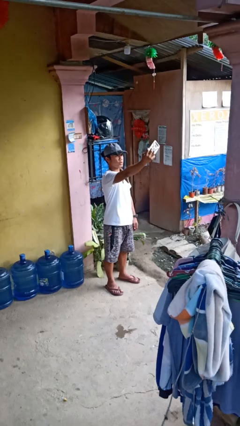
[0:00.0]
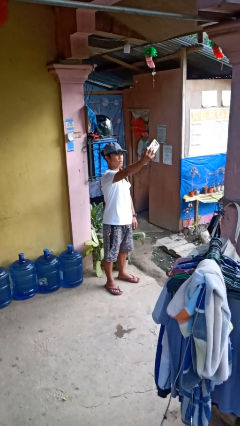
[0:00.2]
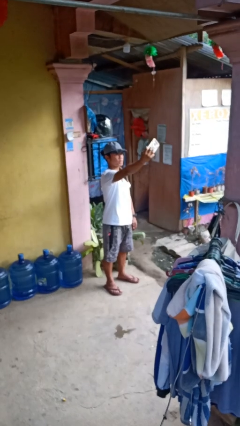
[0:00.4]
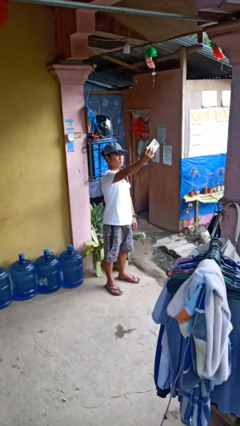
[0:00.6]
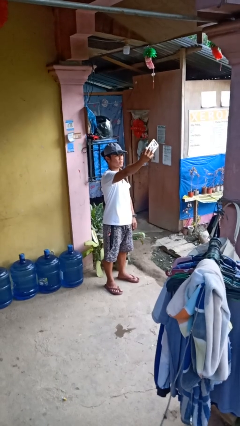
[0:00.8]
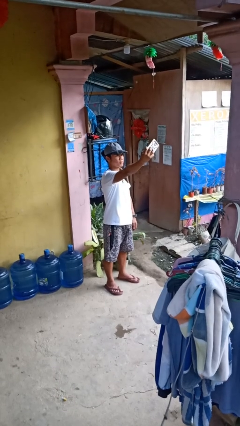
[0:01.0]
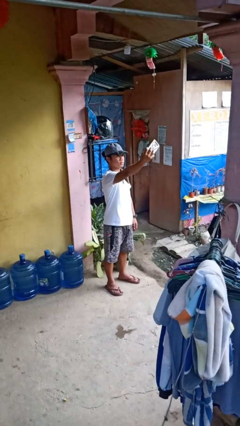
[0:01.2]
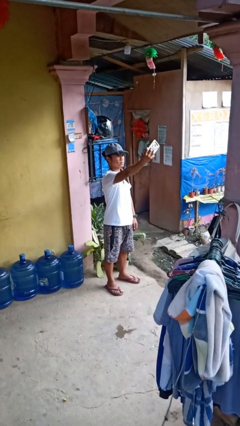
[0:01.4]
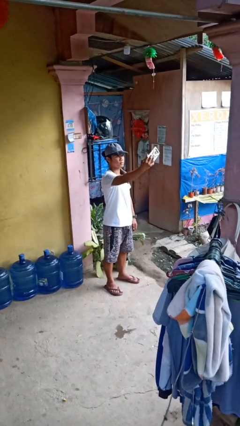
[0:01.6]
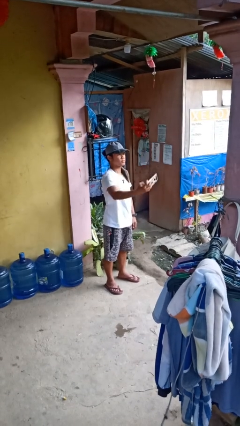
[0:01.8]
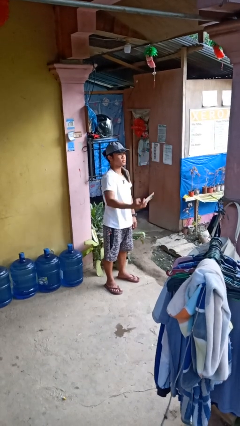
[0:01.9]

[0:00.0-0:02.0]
person takes selfie

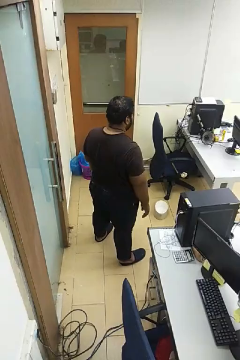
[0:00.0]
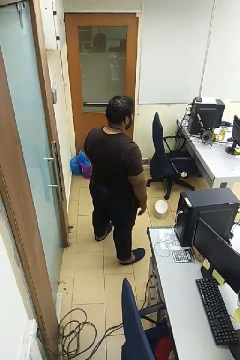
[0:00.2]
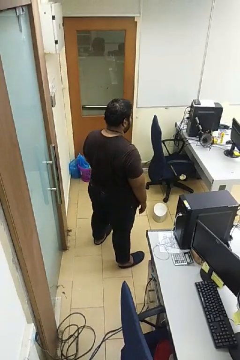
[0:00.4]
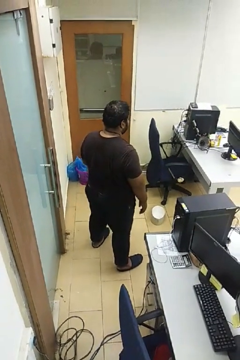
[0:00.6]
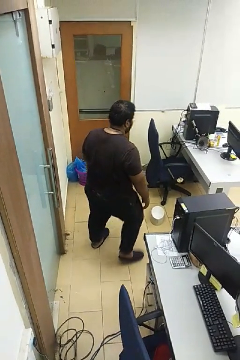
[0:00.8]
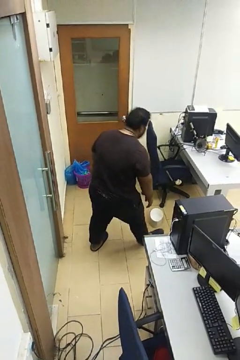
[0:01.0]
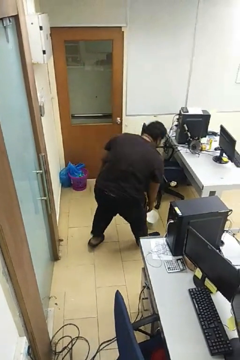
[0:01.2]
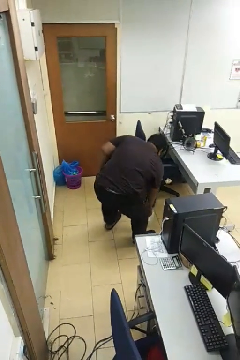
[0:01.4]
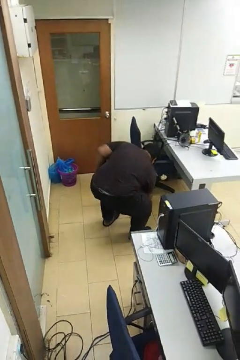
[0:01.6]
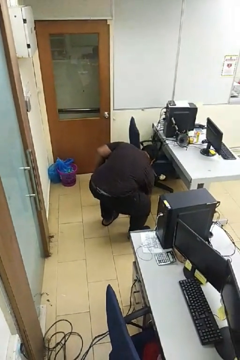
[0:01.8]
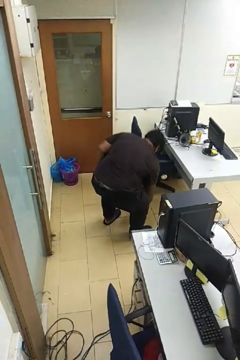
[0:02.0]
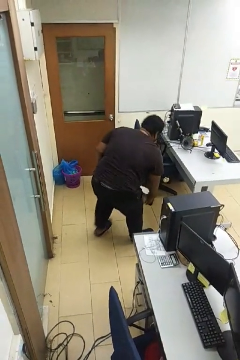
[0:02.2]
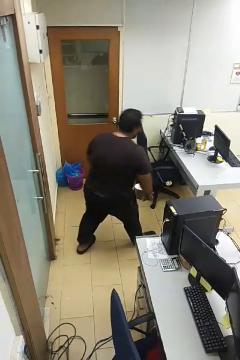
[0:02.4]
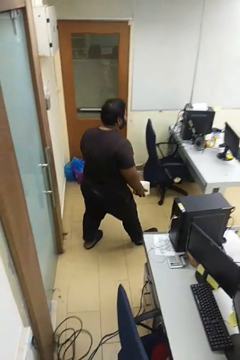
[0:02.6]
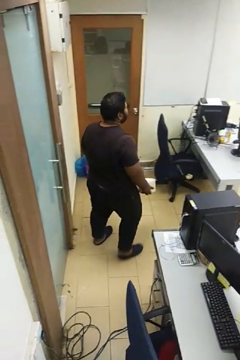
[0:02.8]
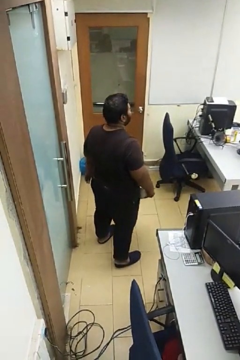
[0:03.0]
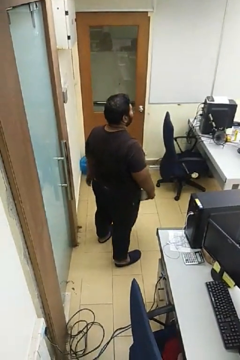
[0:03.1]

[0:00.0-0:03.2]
person picks up object from floor

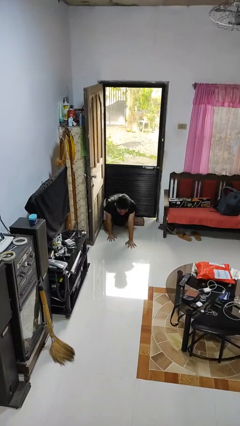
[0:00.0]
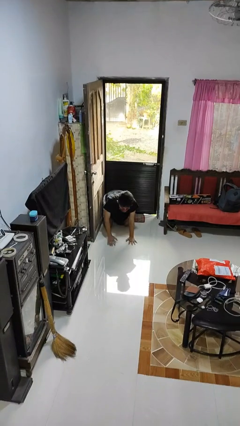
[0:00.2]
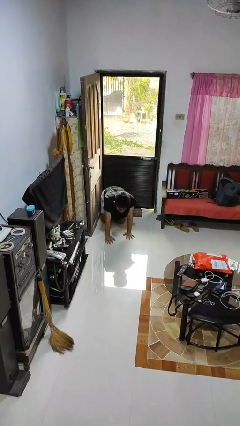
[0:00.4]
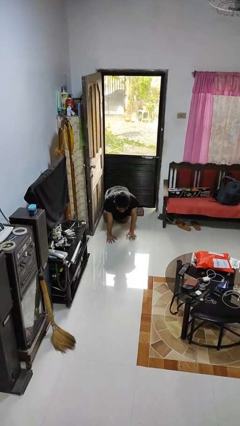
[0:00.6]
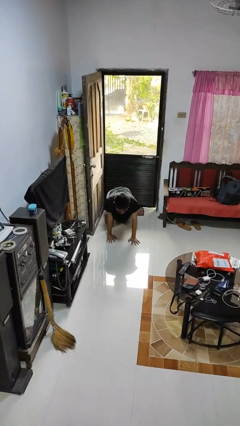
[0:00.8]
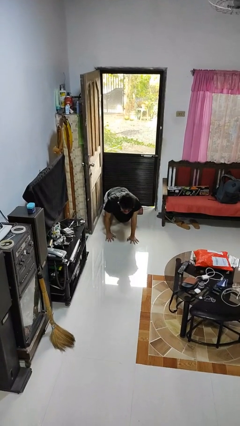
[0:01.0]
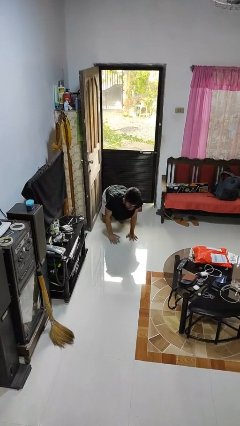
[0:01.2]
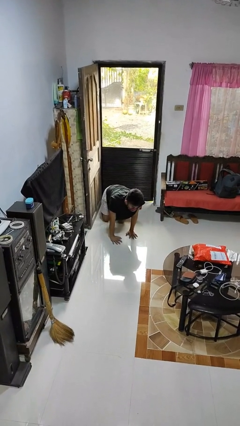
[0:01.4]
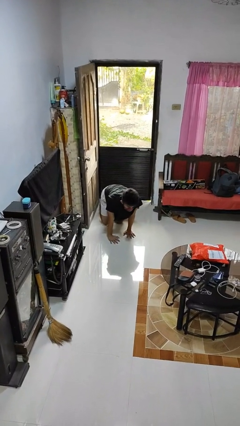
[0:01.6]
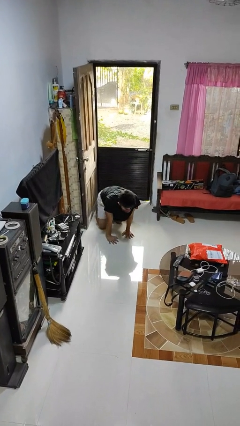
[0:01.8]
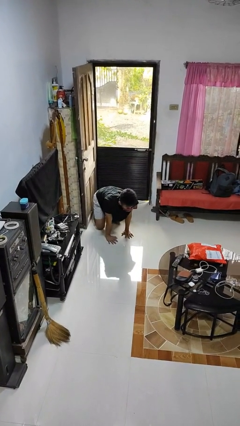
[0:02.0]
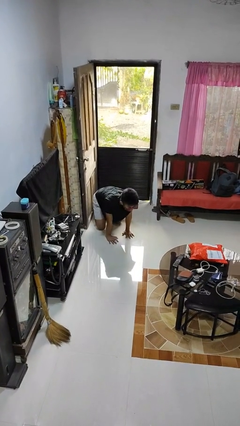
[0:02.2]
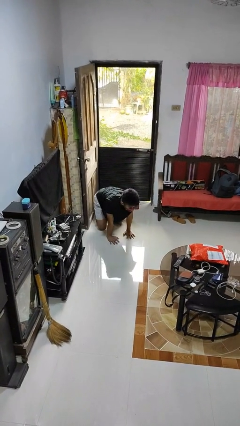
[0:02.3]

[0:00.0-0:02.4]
person crawls

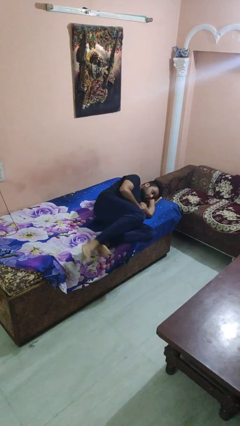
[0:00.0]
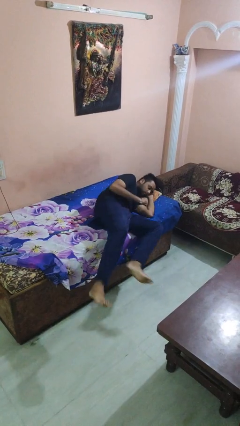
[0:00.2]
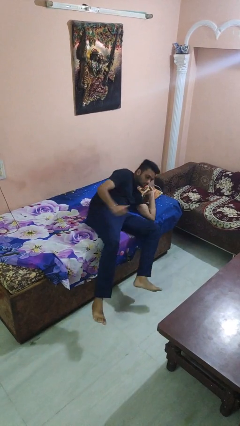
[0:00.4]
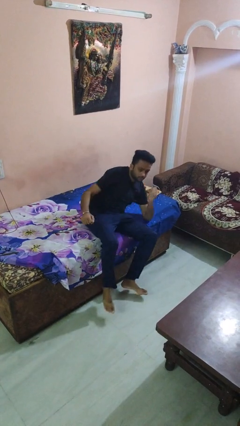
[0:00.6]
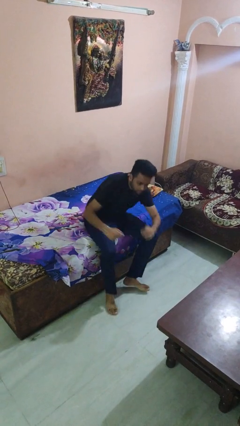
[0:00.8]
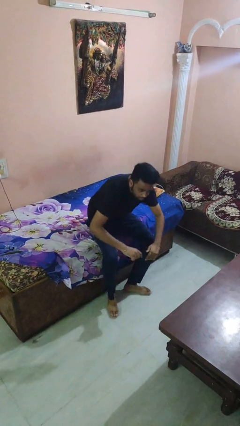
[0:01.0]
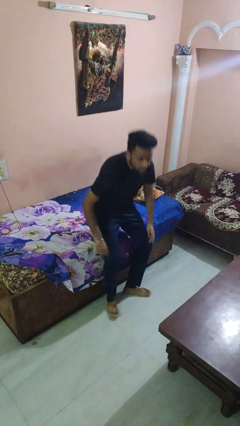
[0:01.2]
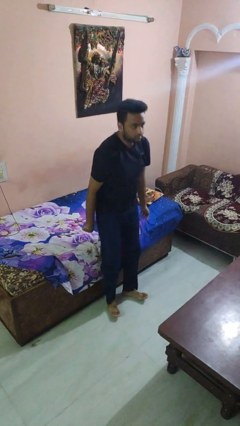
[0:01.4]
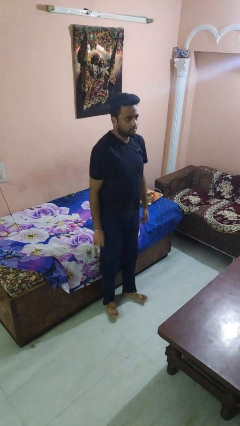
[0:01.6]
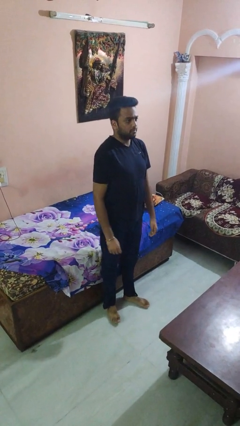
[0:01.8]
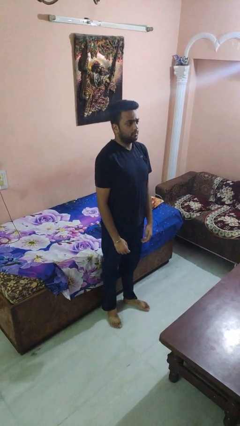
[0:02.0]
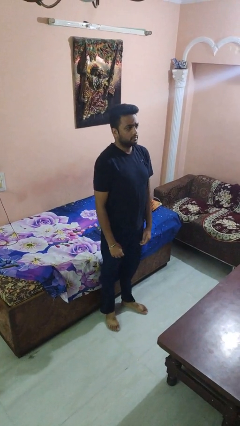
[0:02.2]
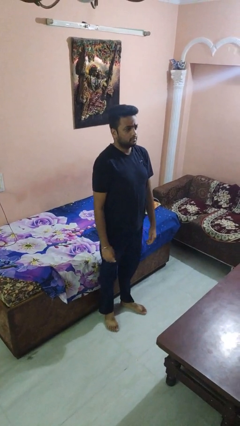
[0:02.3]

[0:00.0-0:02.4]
person stands up

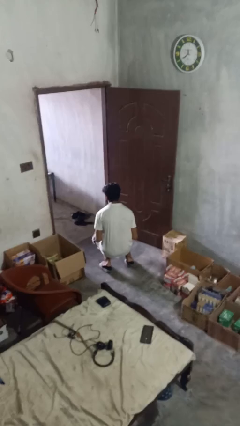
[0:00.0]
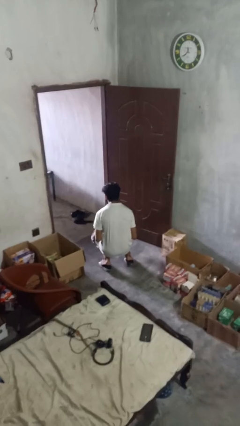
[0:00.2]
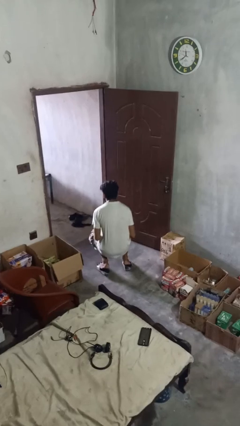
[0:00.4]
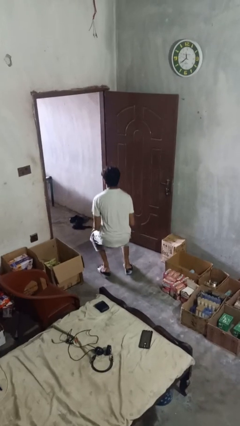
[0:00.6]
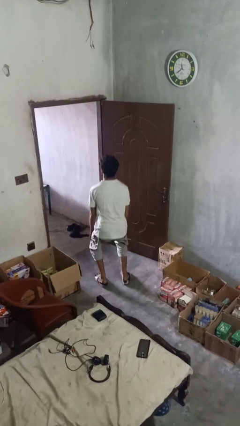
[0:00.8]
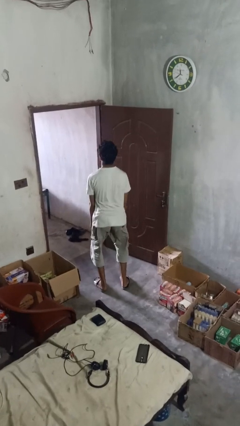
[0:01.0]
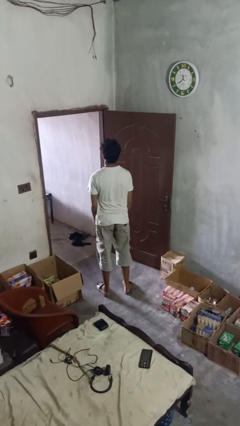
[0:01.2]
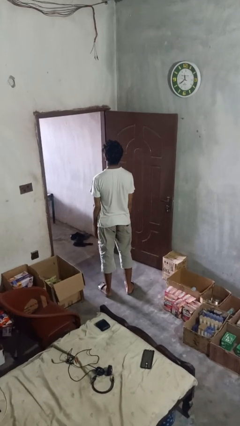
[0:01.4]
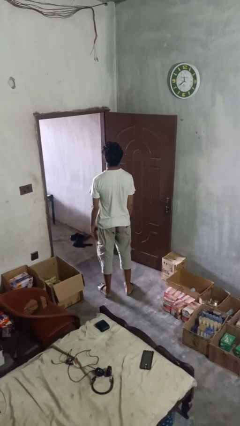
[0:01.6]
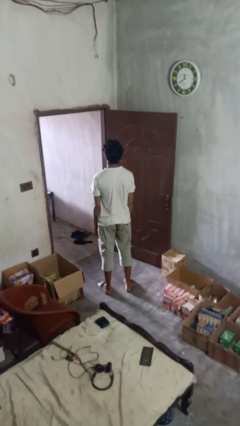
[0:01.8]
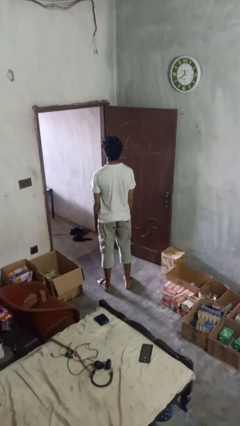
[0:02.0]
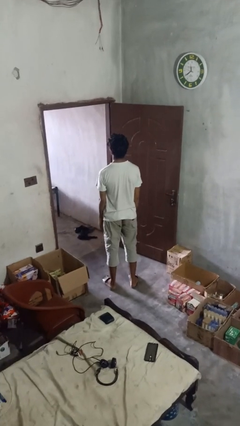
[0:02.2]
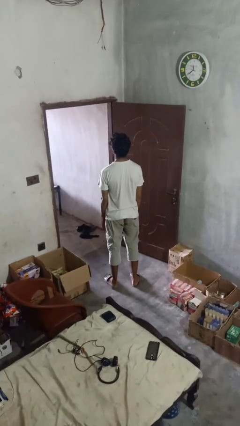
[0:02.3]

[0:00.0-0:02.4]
person stands up from floor

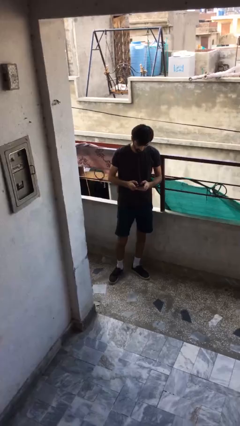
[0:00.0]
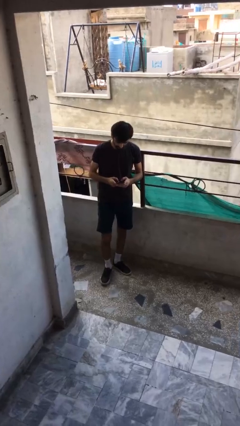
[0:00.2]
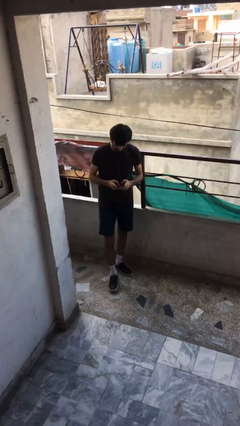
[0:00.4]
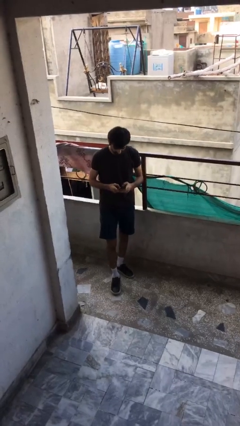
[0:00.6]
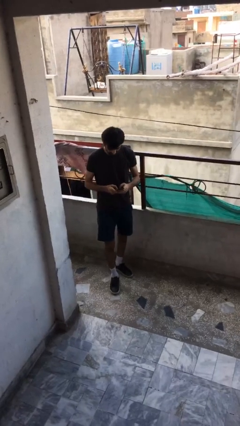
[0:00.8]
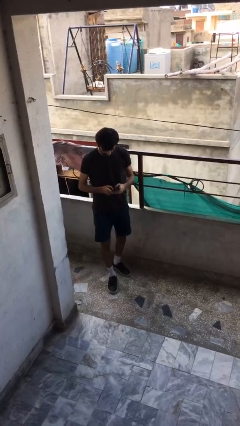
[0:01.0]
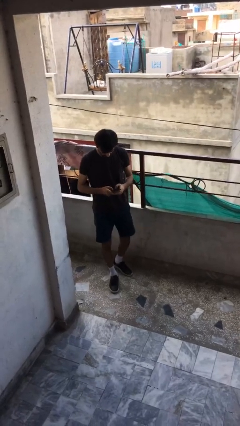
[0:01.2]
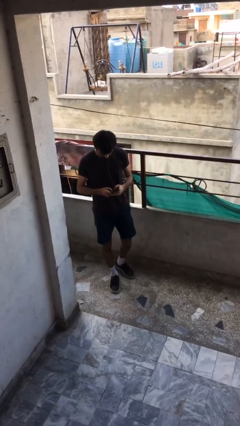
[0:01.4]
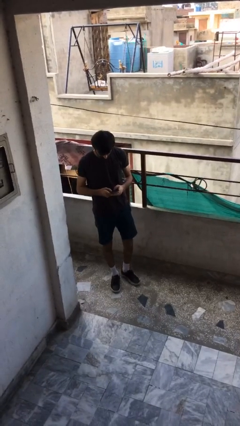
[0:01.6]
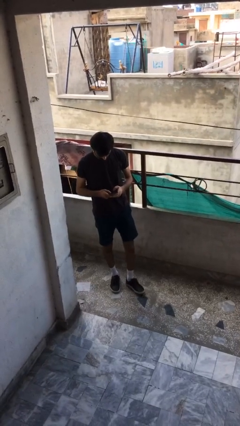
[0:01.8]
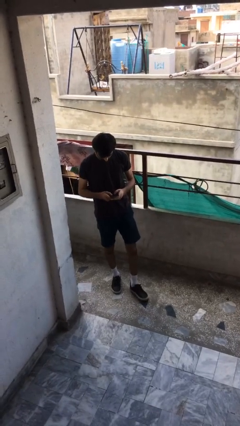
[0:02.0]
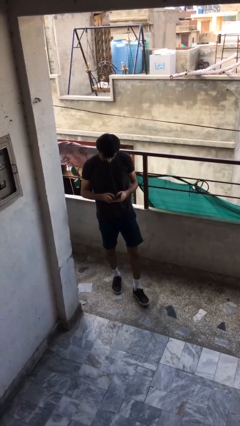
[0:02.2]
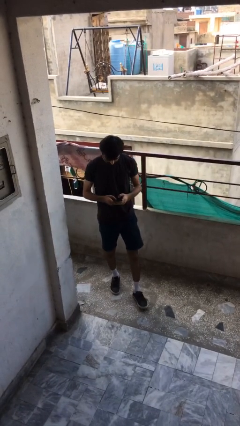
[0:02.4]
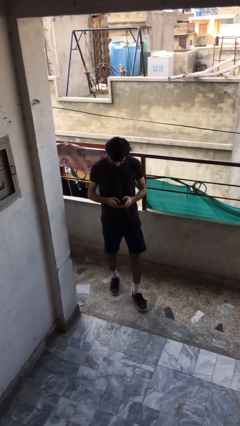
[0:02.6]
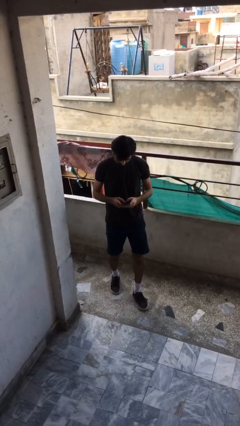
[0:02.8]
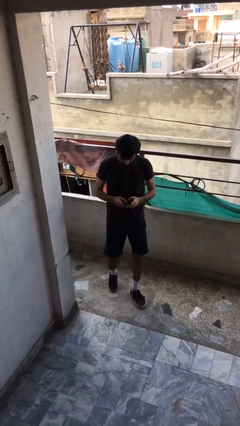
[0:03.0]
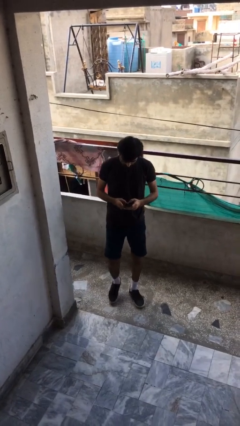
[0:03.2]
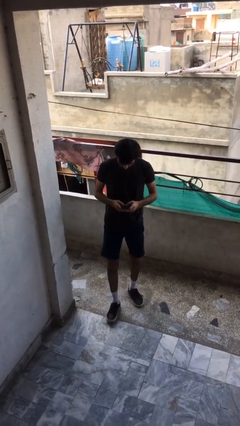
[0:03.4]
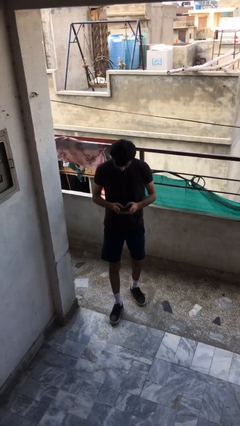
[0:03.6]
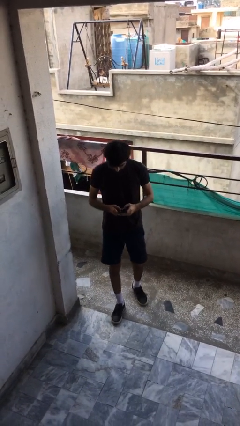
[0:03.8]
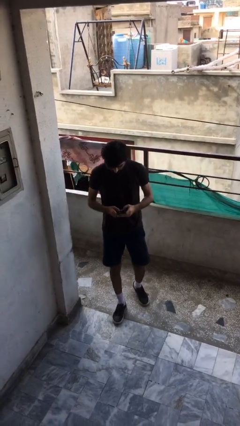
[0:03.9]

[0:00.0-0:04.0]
person texts on phone

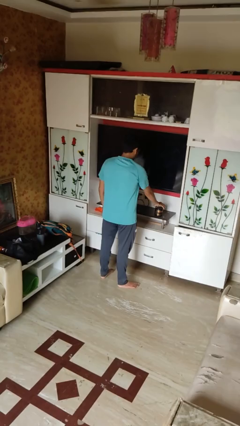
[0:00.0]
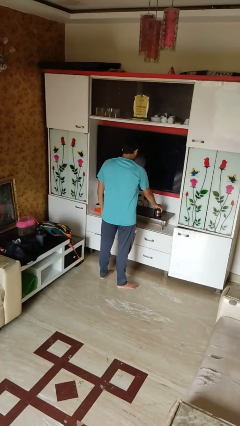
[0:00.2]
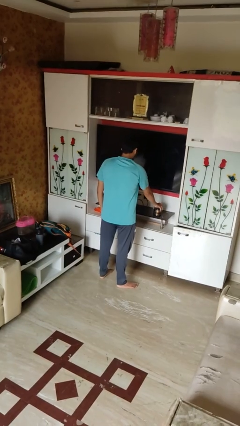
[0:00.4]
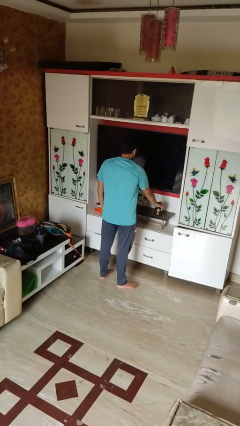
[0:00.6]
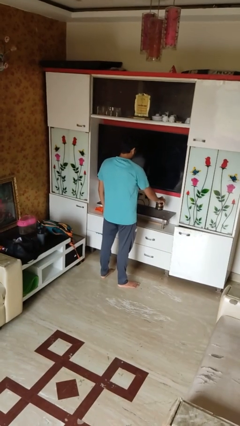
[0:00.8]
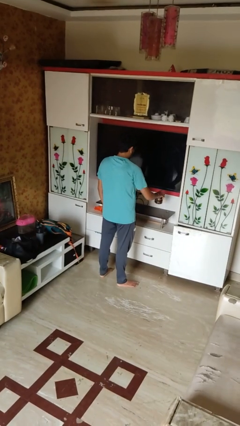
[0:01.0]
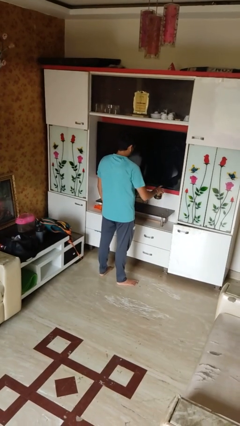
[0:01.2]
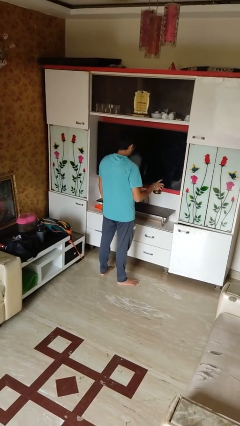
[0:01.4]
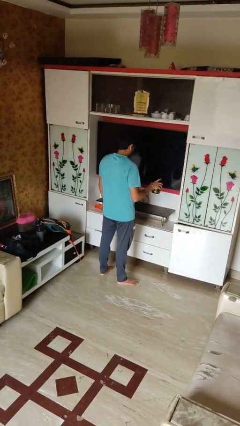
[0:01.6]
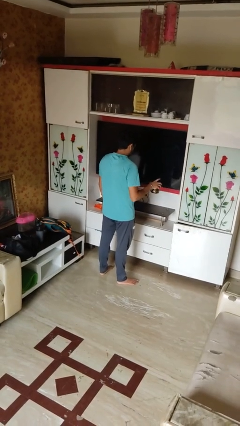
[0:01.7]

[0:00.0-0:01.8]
person picks up object from countertop
